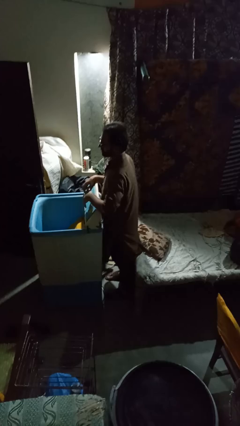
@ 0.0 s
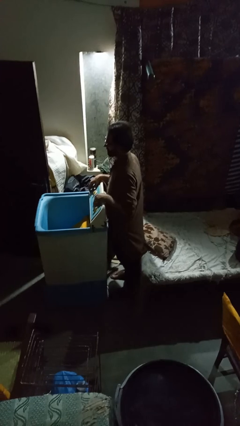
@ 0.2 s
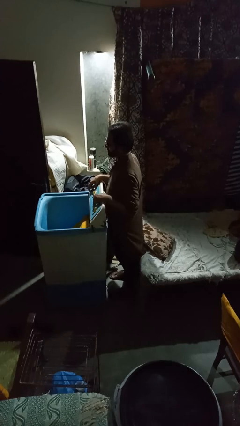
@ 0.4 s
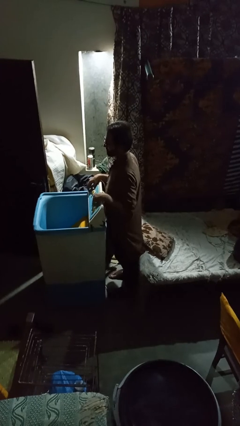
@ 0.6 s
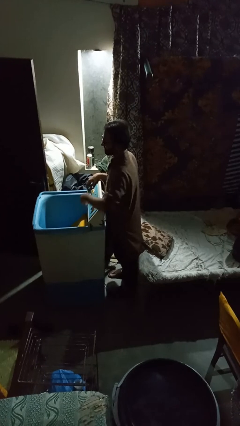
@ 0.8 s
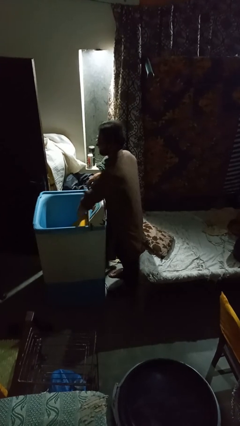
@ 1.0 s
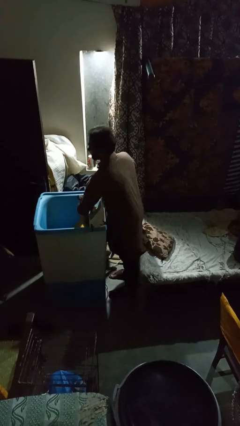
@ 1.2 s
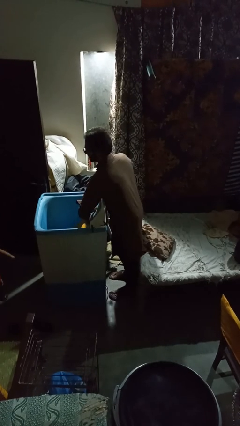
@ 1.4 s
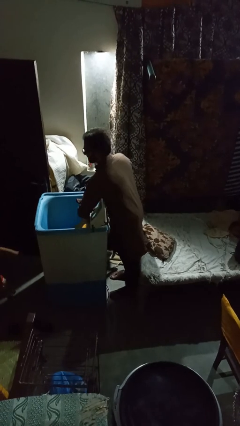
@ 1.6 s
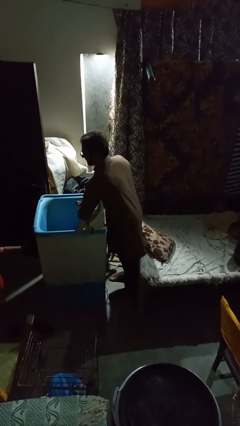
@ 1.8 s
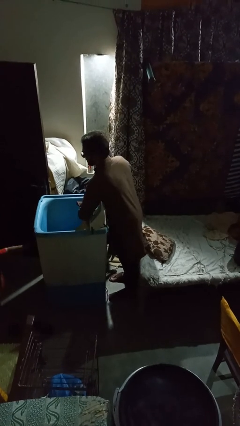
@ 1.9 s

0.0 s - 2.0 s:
person unloads clotheswasher

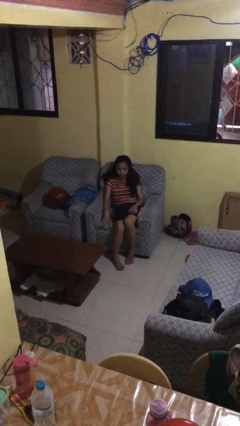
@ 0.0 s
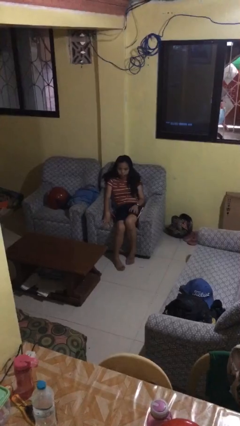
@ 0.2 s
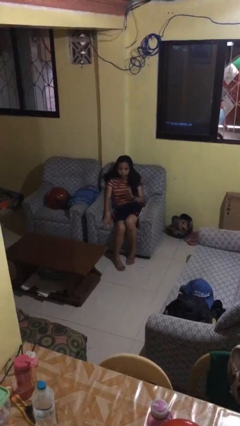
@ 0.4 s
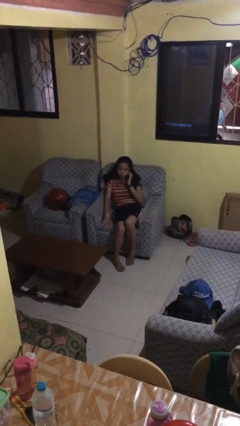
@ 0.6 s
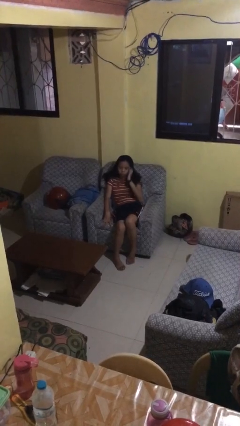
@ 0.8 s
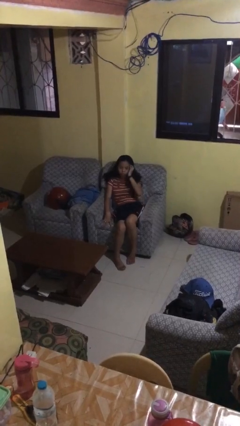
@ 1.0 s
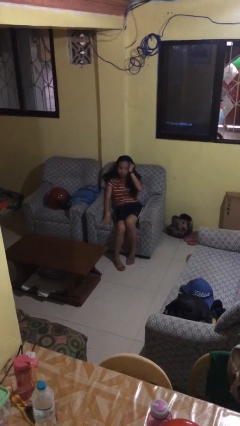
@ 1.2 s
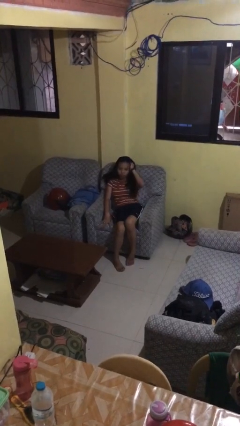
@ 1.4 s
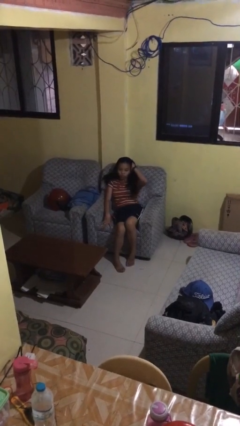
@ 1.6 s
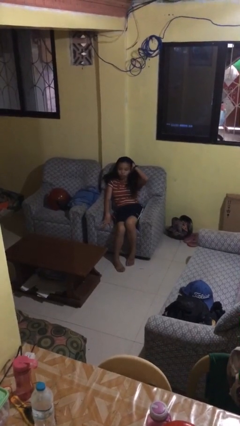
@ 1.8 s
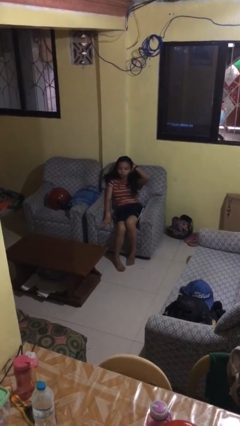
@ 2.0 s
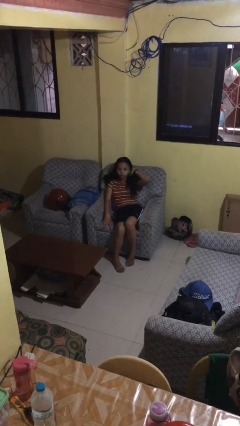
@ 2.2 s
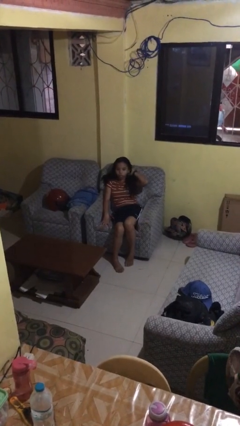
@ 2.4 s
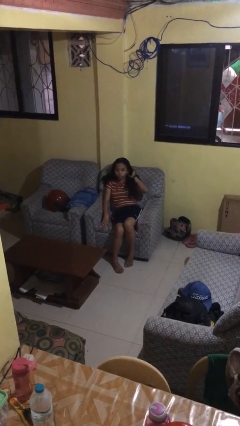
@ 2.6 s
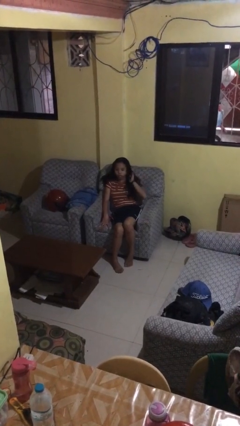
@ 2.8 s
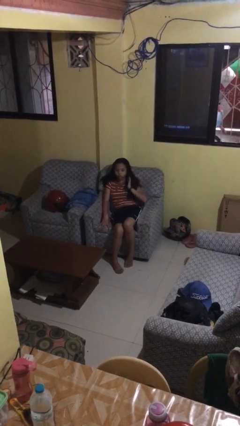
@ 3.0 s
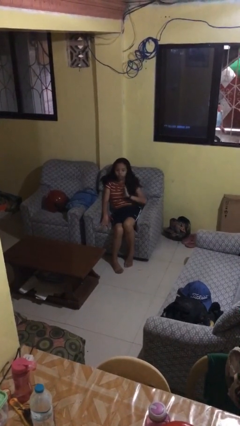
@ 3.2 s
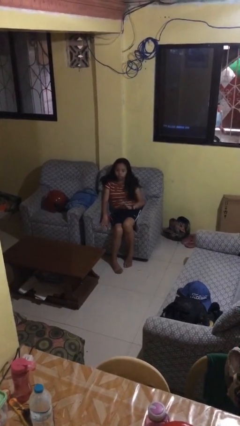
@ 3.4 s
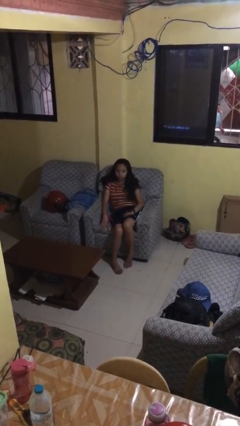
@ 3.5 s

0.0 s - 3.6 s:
person strokes hair

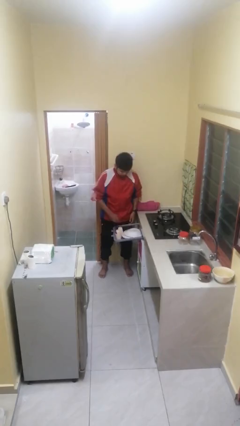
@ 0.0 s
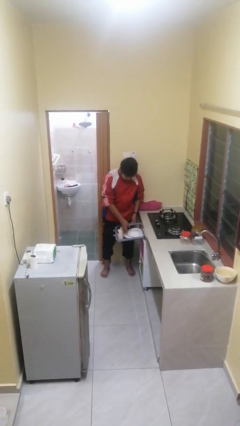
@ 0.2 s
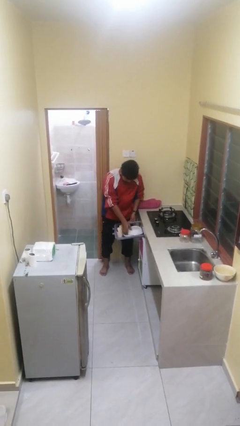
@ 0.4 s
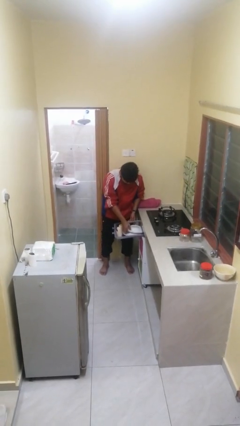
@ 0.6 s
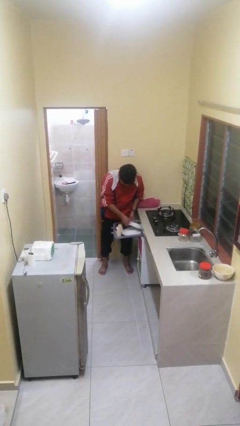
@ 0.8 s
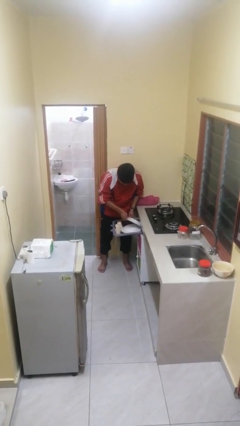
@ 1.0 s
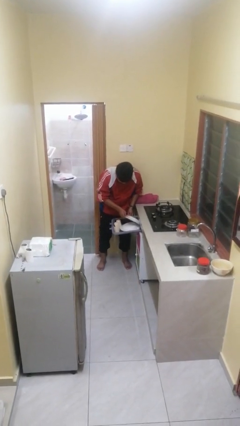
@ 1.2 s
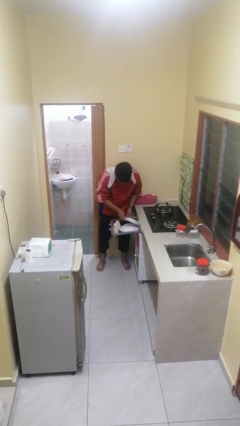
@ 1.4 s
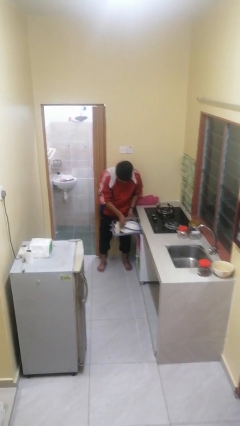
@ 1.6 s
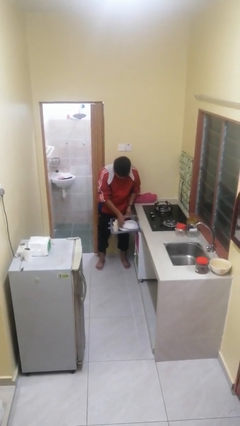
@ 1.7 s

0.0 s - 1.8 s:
person searches in kitchen drawer

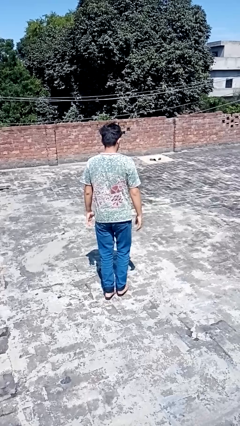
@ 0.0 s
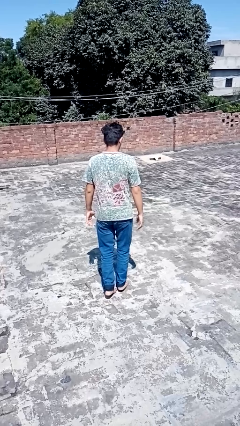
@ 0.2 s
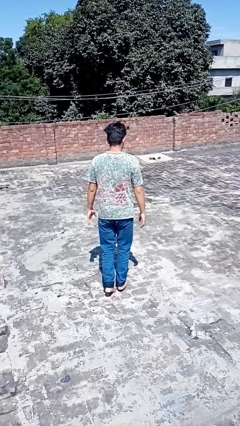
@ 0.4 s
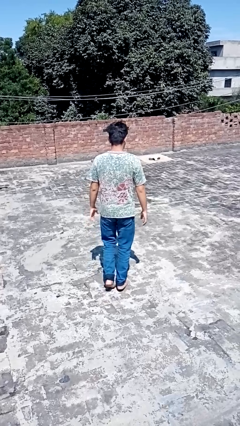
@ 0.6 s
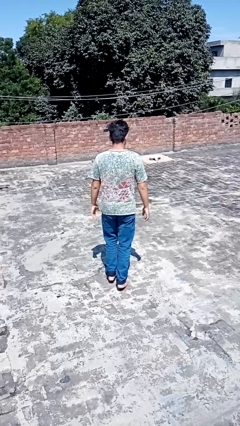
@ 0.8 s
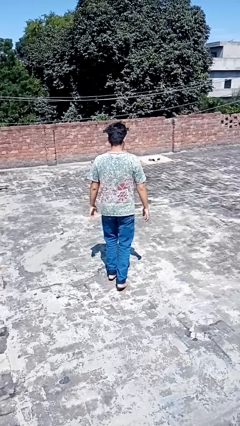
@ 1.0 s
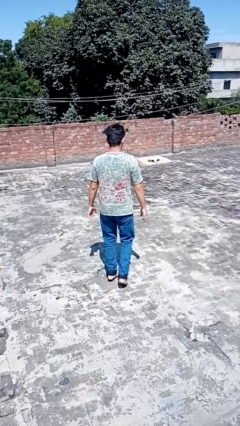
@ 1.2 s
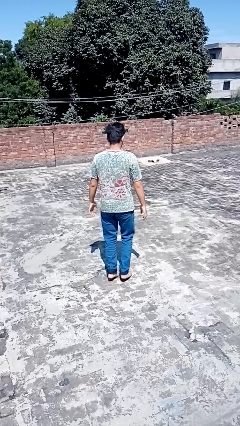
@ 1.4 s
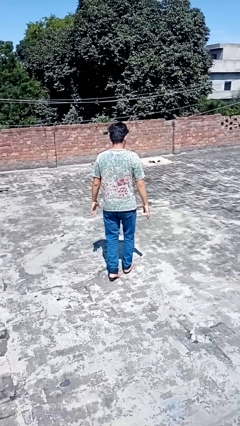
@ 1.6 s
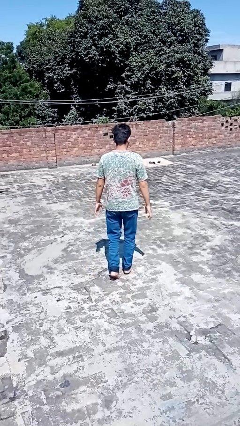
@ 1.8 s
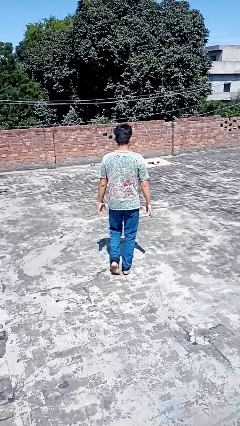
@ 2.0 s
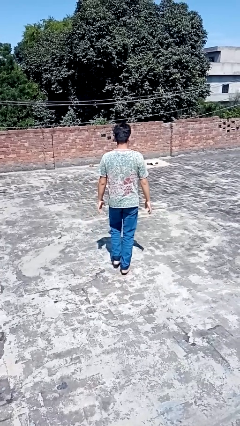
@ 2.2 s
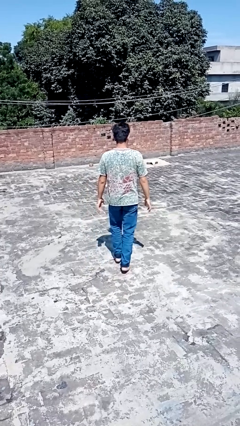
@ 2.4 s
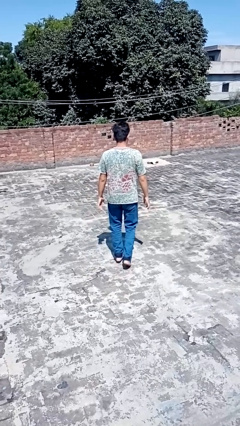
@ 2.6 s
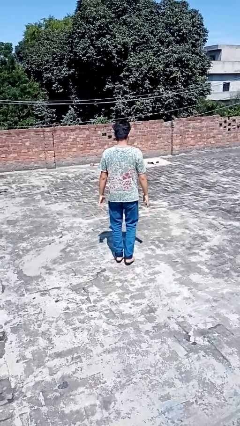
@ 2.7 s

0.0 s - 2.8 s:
person walks tiptoe

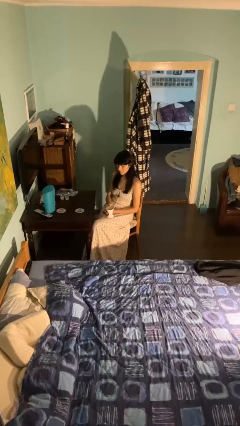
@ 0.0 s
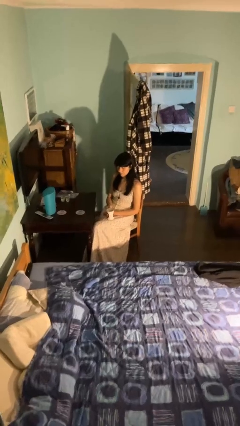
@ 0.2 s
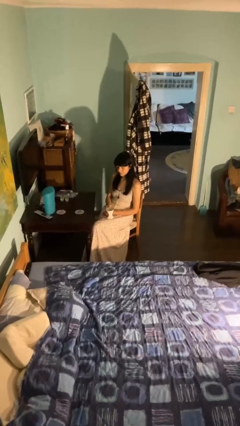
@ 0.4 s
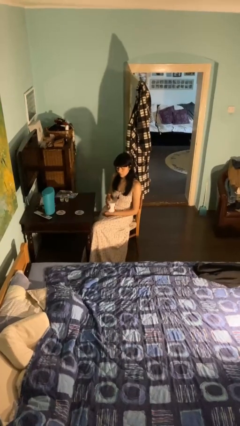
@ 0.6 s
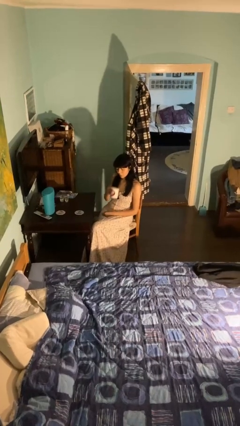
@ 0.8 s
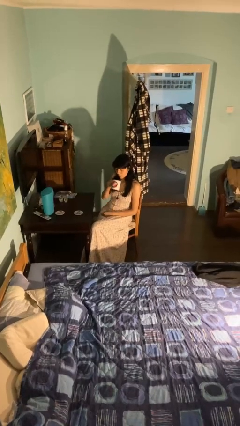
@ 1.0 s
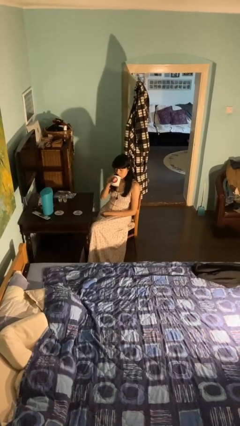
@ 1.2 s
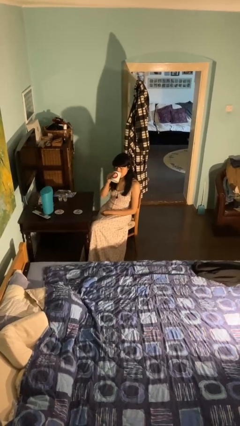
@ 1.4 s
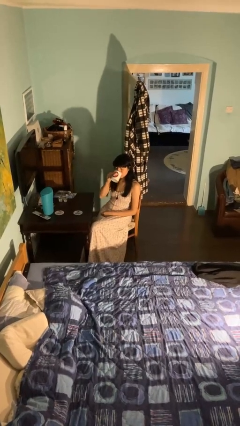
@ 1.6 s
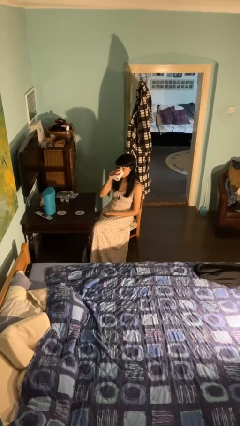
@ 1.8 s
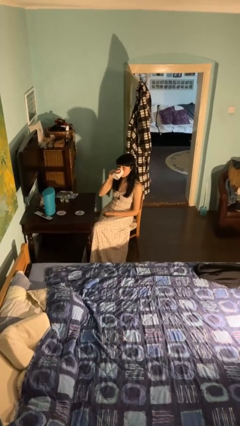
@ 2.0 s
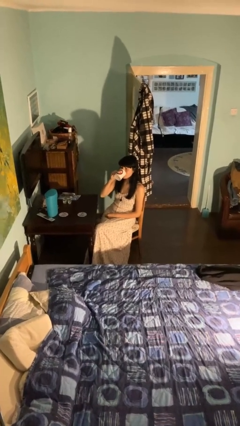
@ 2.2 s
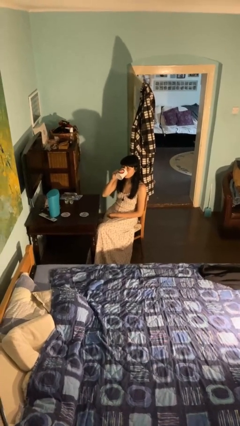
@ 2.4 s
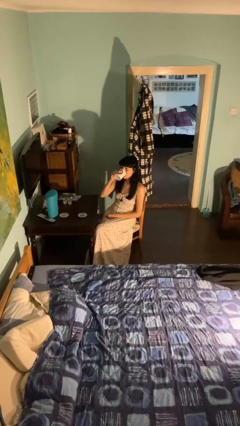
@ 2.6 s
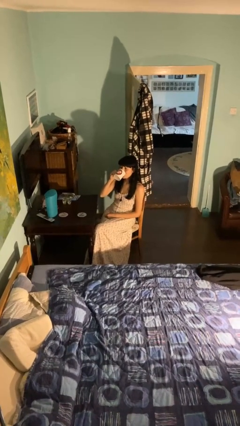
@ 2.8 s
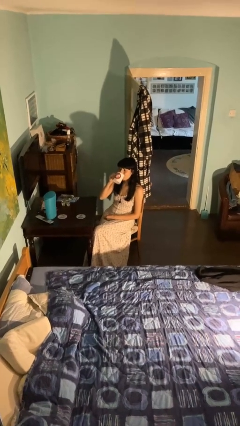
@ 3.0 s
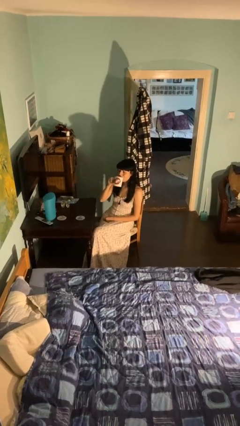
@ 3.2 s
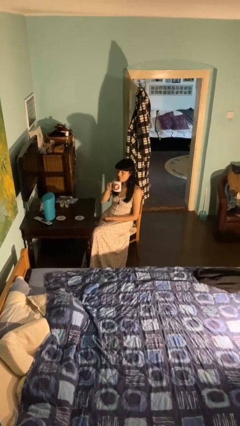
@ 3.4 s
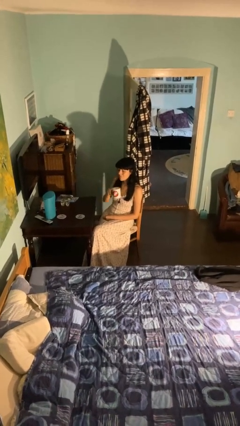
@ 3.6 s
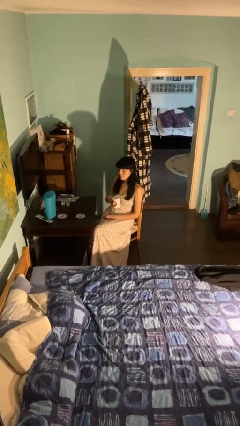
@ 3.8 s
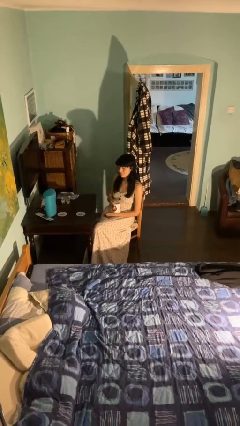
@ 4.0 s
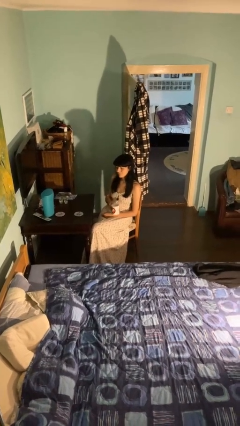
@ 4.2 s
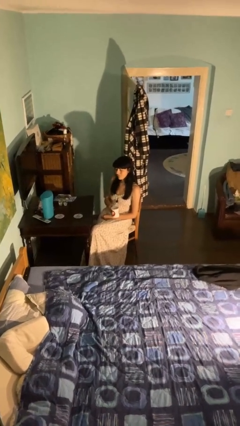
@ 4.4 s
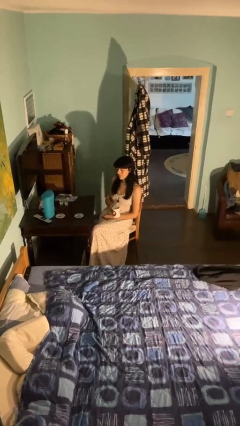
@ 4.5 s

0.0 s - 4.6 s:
person drinks from mug

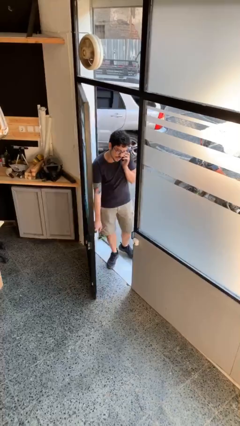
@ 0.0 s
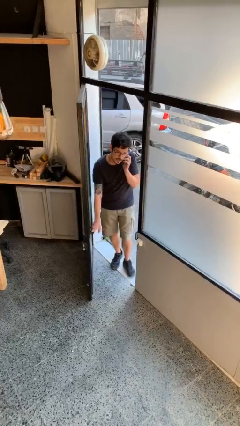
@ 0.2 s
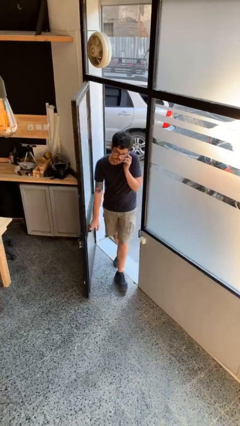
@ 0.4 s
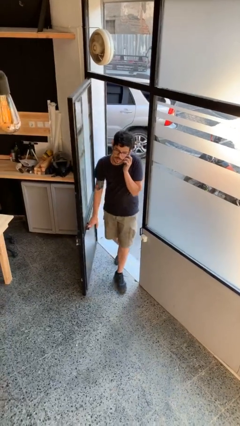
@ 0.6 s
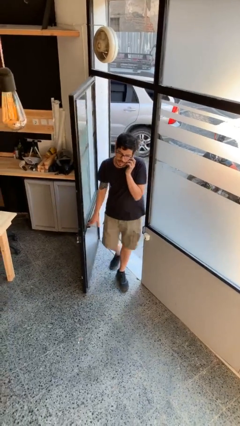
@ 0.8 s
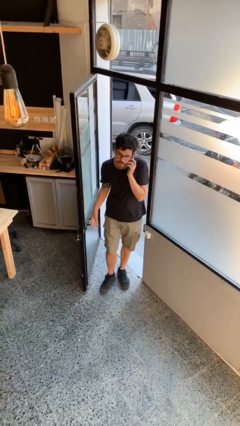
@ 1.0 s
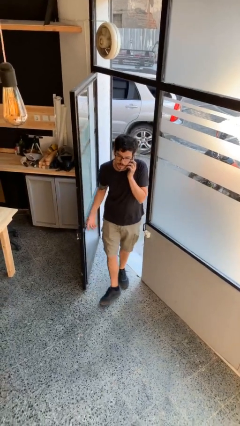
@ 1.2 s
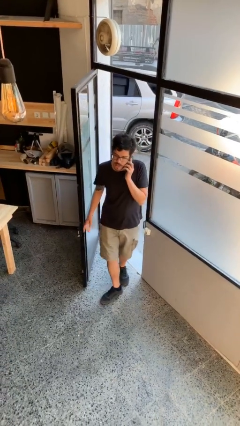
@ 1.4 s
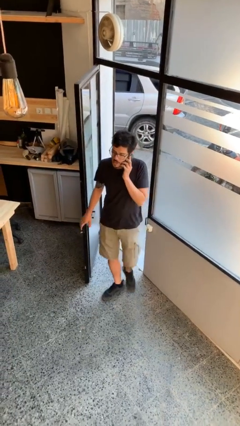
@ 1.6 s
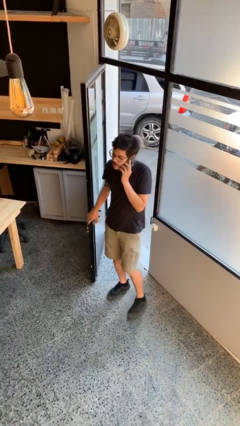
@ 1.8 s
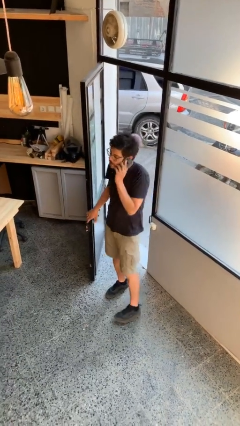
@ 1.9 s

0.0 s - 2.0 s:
person enters scene through structure

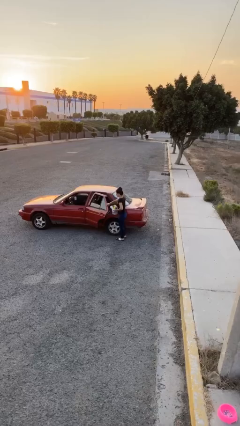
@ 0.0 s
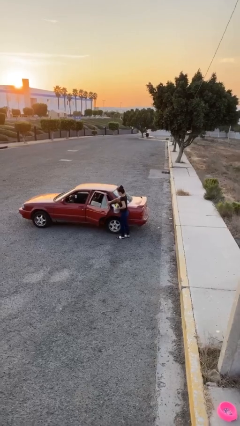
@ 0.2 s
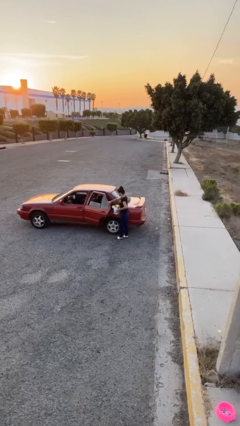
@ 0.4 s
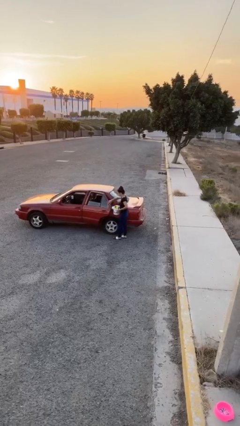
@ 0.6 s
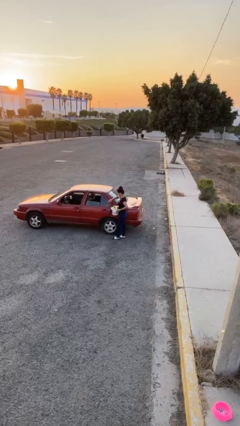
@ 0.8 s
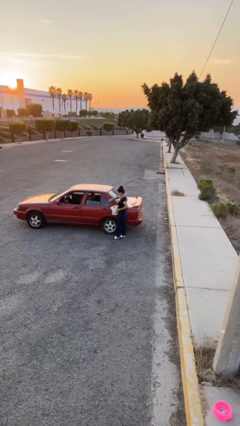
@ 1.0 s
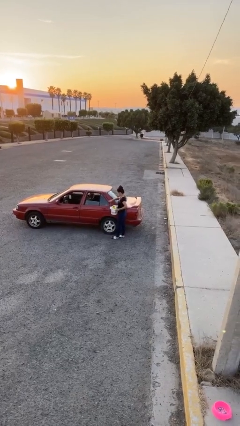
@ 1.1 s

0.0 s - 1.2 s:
person closes car door
